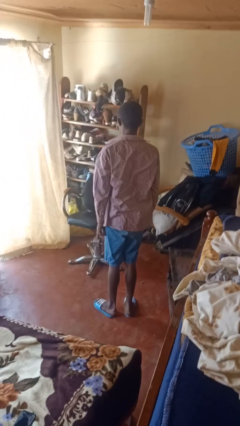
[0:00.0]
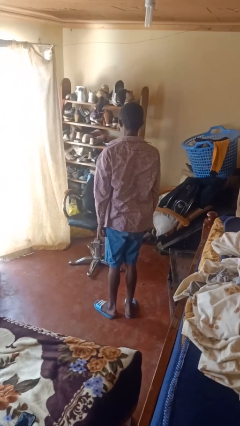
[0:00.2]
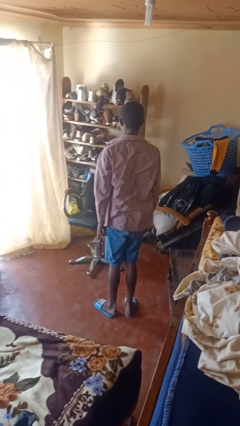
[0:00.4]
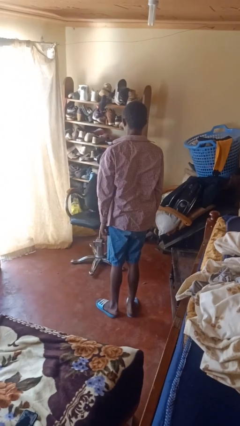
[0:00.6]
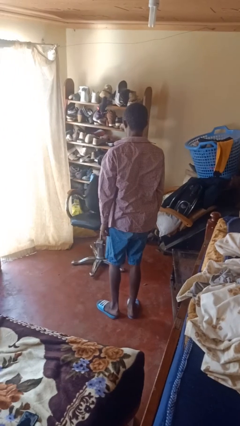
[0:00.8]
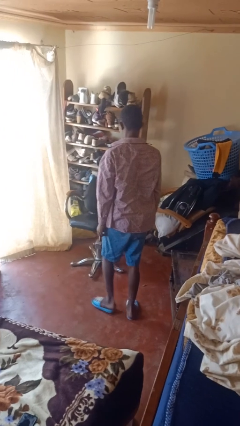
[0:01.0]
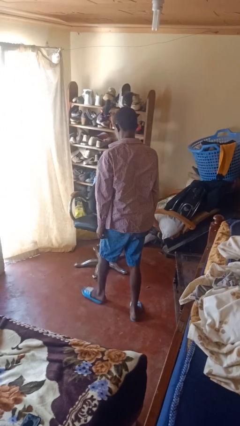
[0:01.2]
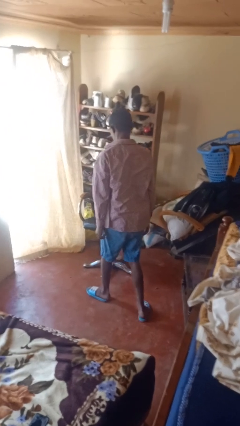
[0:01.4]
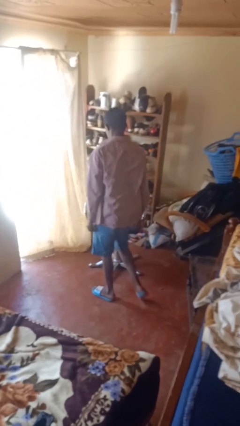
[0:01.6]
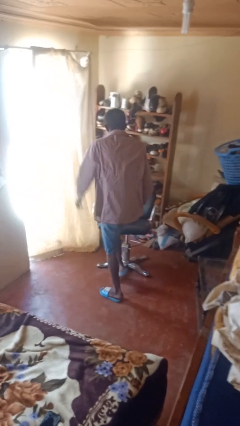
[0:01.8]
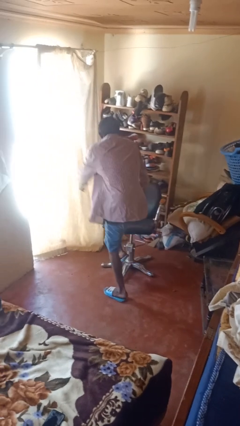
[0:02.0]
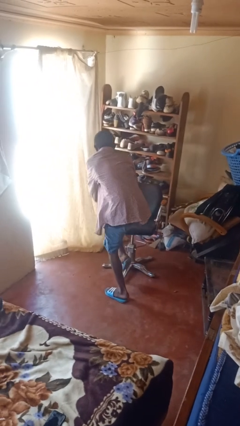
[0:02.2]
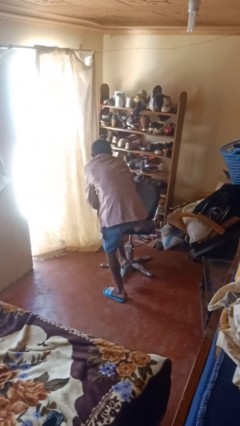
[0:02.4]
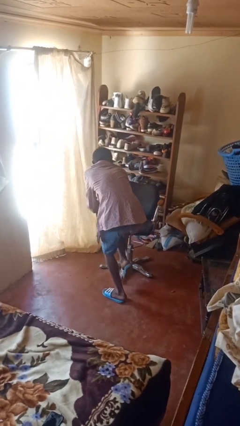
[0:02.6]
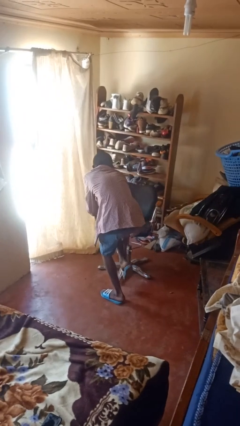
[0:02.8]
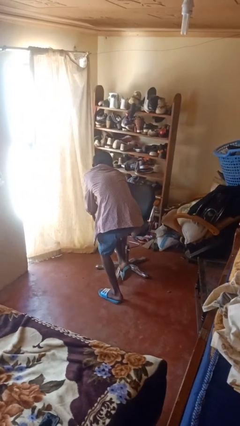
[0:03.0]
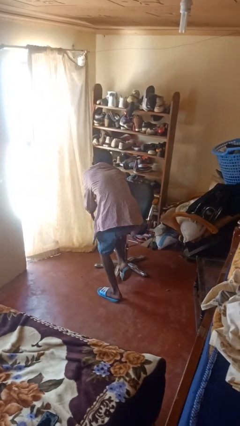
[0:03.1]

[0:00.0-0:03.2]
person stubs toe

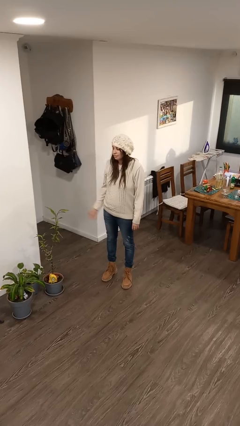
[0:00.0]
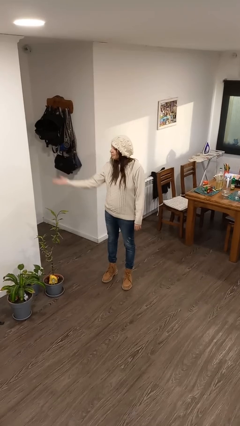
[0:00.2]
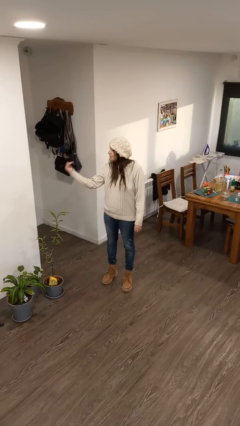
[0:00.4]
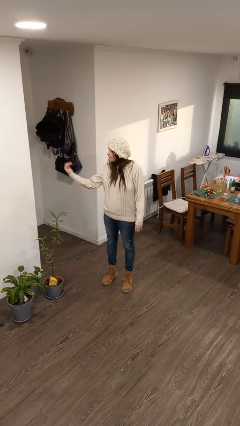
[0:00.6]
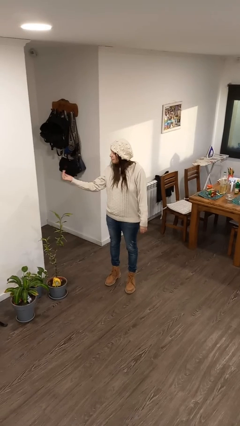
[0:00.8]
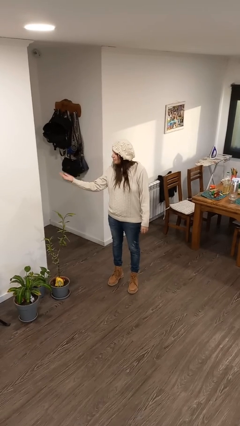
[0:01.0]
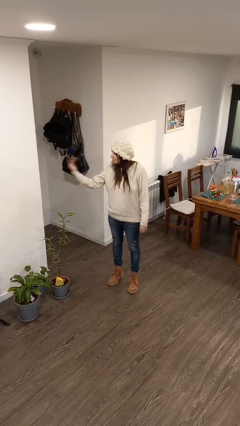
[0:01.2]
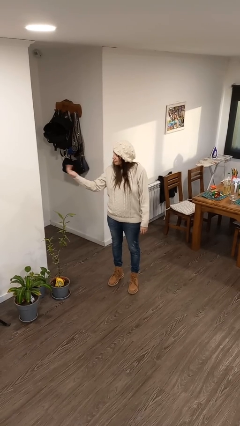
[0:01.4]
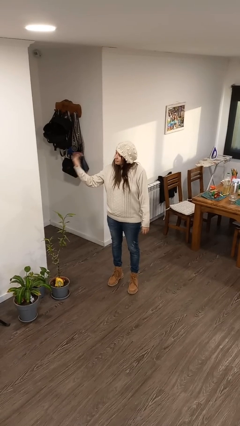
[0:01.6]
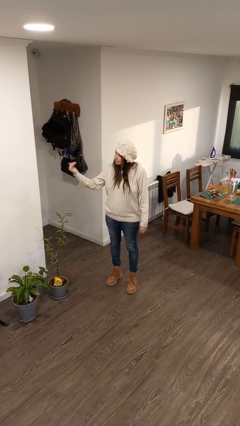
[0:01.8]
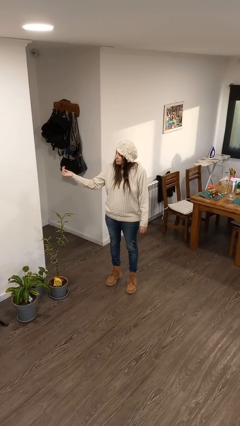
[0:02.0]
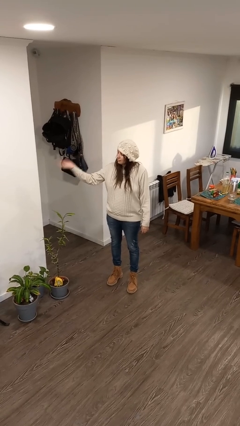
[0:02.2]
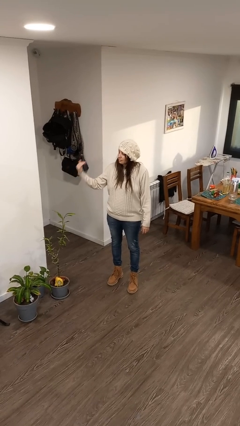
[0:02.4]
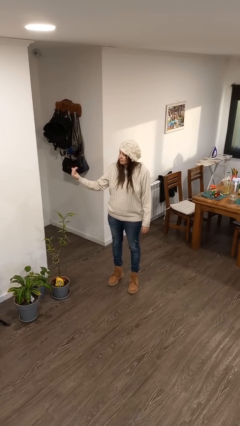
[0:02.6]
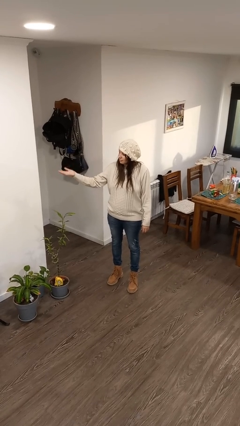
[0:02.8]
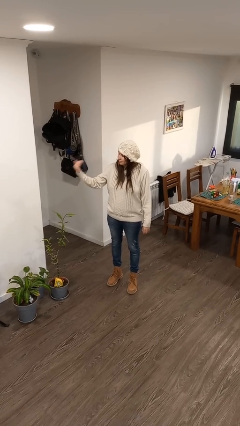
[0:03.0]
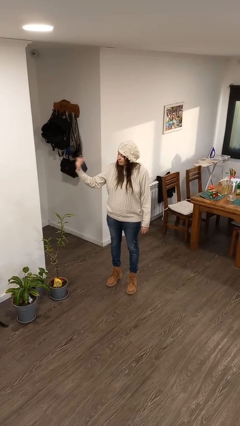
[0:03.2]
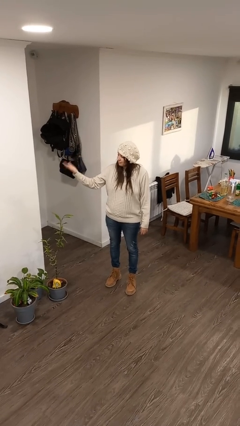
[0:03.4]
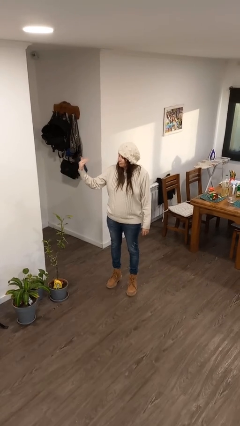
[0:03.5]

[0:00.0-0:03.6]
person gestures come here

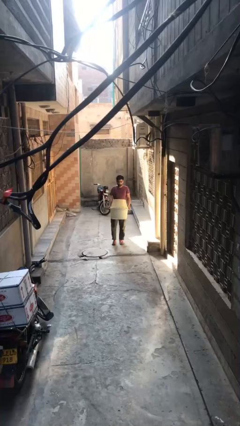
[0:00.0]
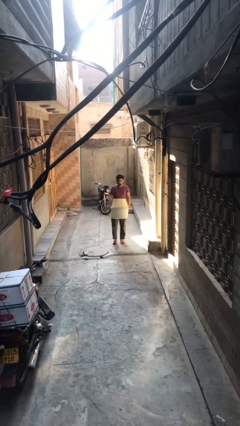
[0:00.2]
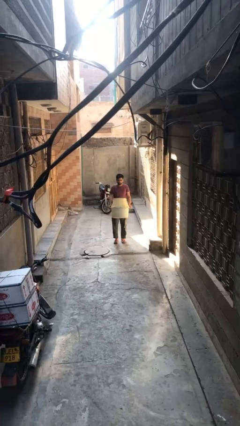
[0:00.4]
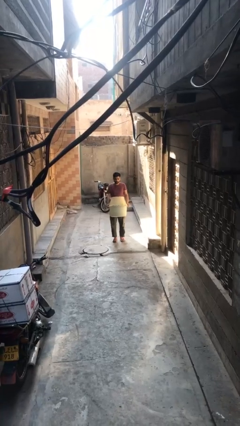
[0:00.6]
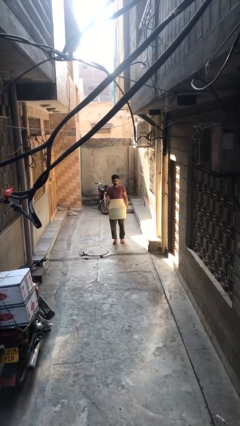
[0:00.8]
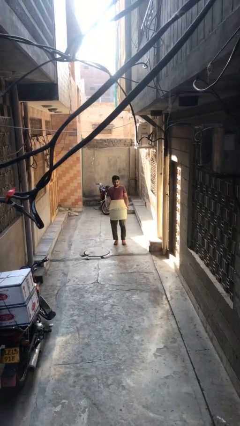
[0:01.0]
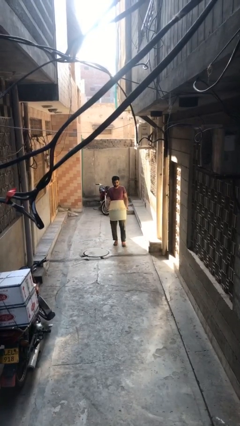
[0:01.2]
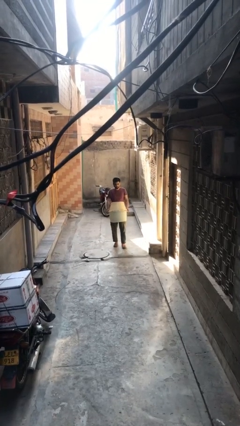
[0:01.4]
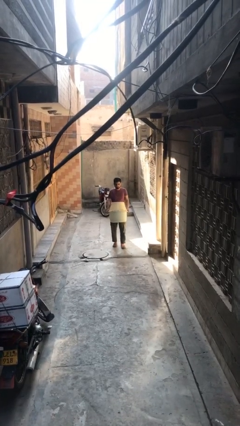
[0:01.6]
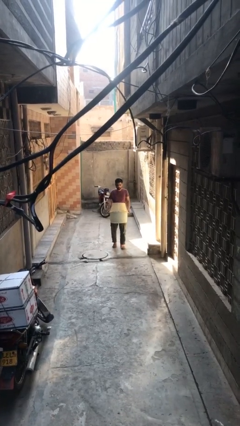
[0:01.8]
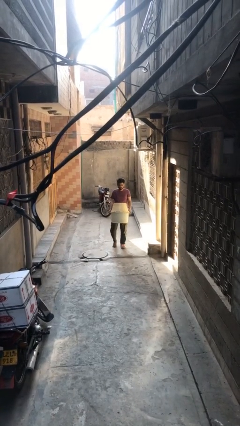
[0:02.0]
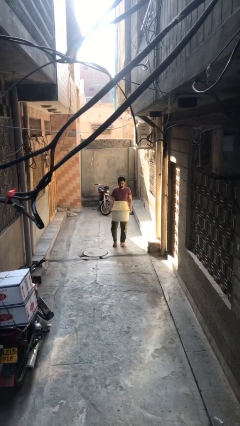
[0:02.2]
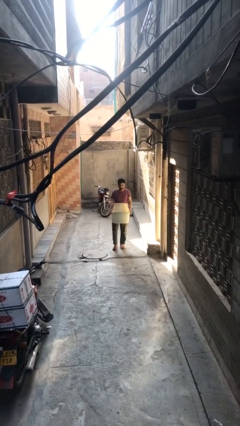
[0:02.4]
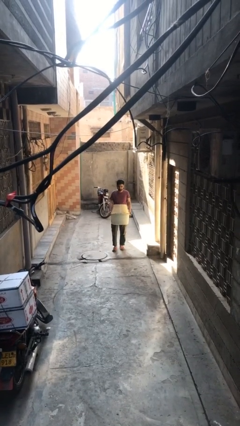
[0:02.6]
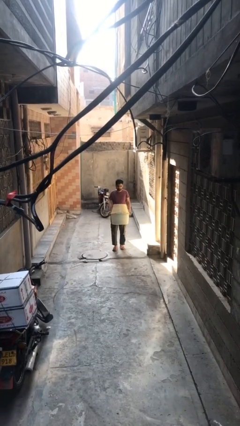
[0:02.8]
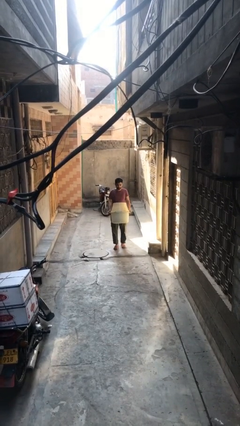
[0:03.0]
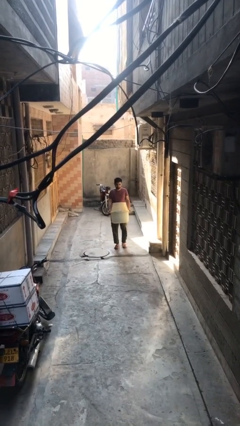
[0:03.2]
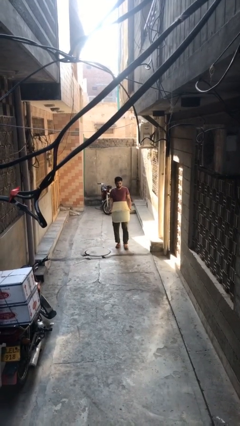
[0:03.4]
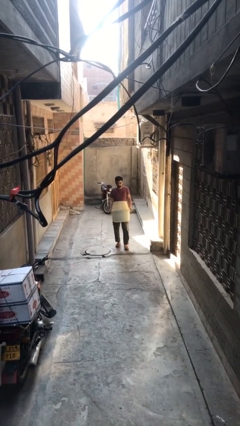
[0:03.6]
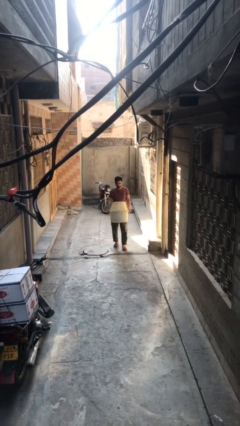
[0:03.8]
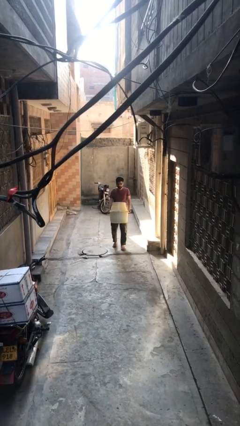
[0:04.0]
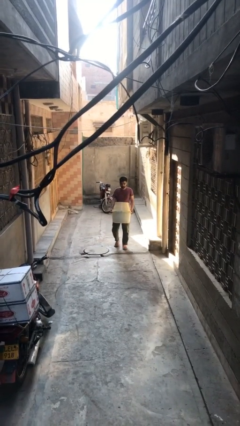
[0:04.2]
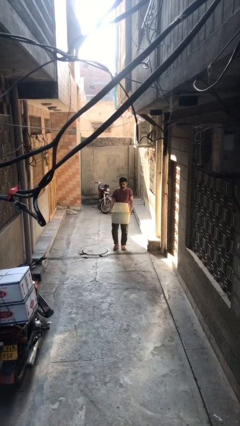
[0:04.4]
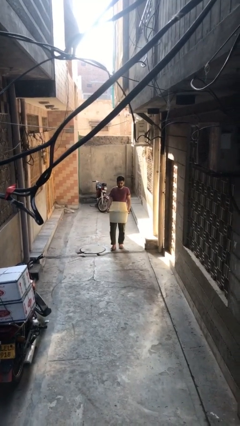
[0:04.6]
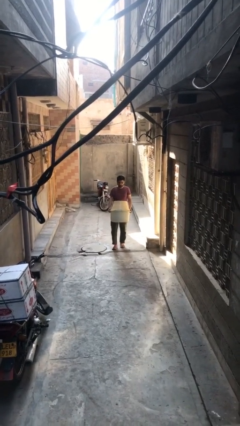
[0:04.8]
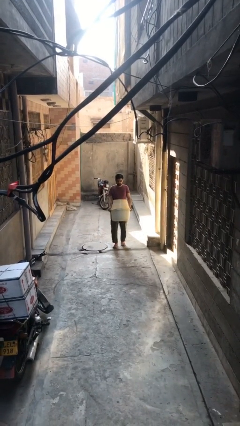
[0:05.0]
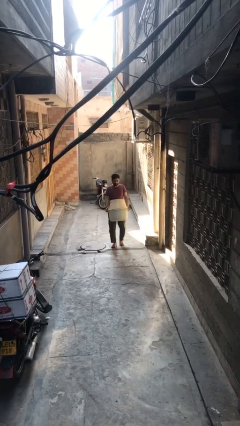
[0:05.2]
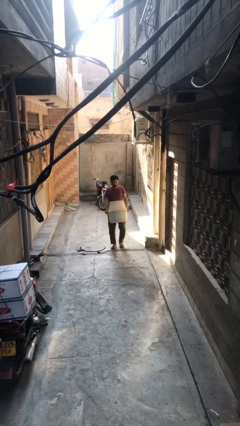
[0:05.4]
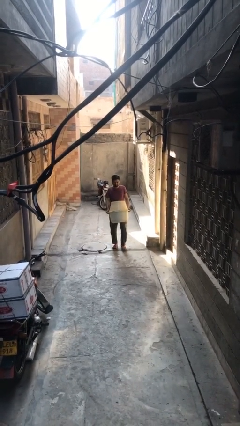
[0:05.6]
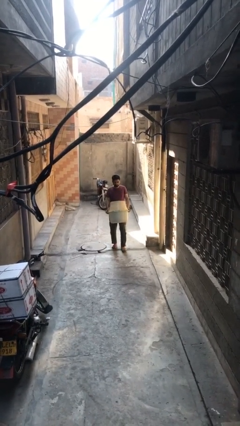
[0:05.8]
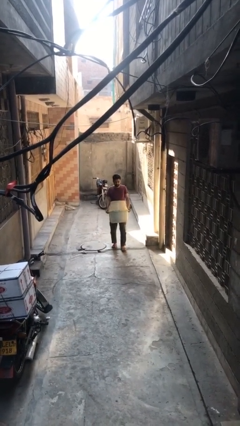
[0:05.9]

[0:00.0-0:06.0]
person carries heavy object

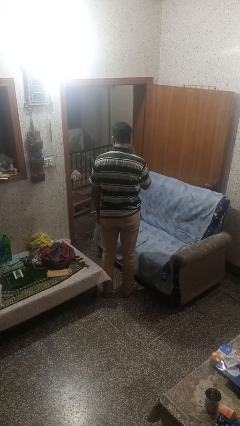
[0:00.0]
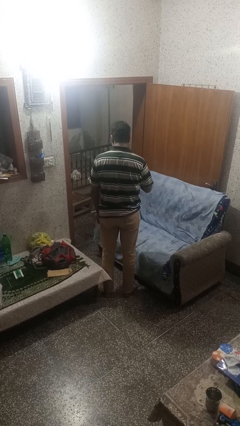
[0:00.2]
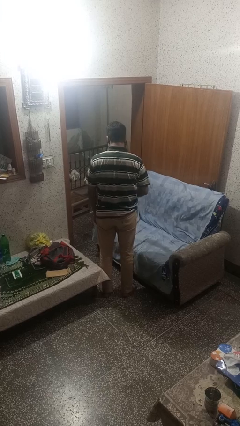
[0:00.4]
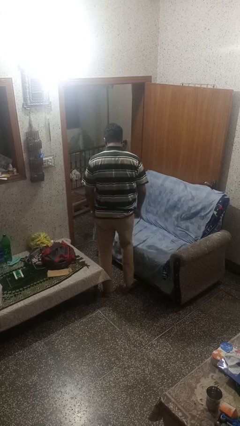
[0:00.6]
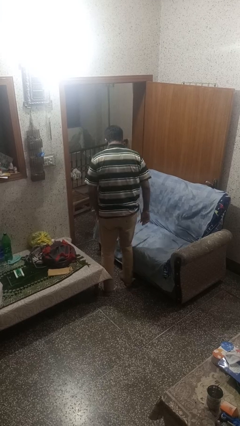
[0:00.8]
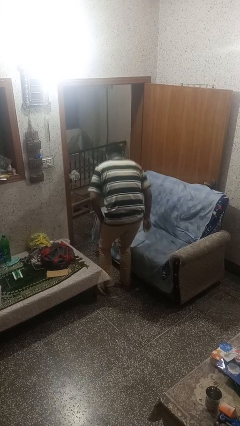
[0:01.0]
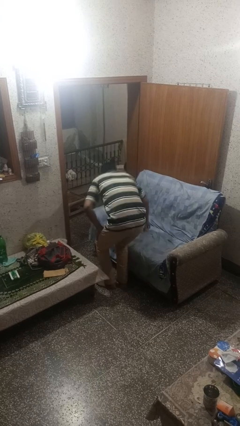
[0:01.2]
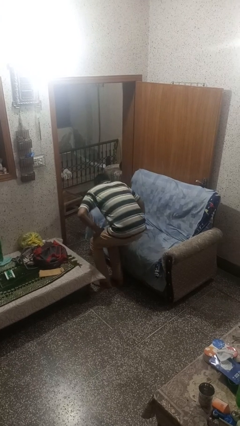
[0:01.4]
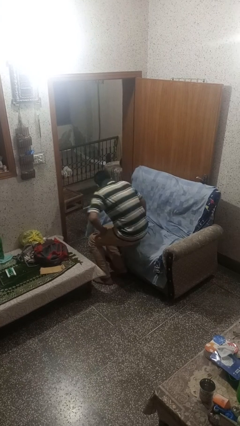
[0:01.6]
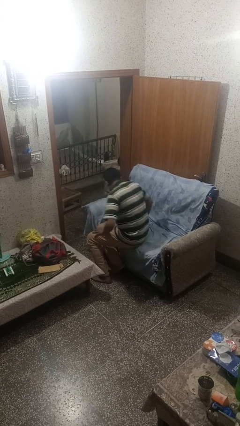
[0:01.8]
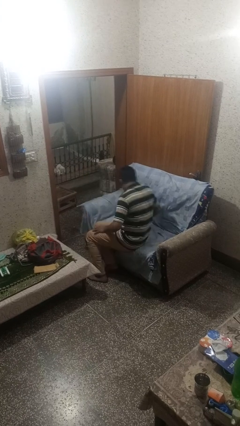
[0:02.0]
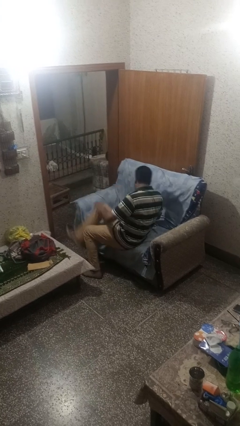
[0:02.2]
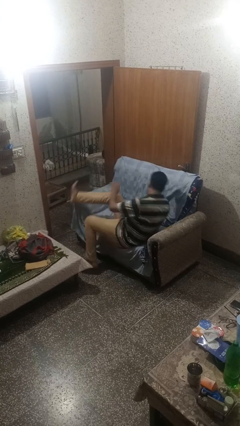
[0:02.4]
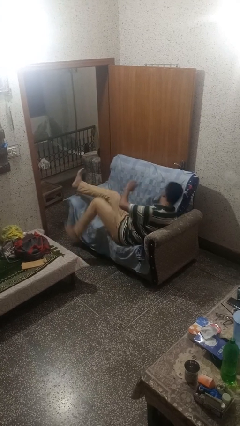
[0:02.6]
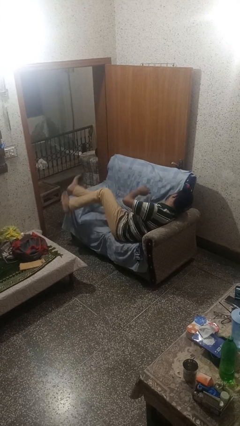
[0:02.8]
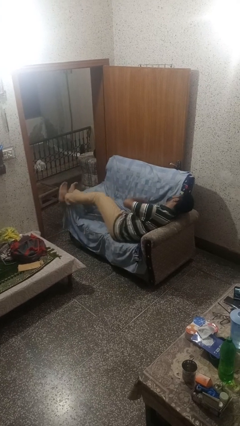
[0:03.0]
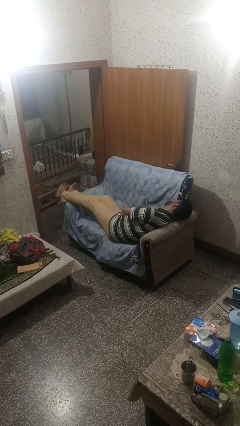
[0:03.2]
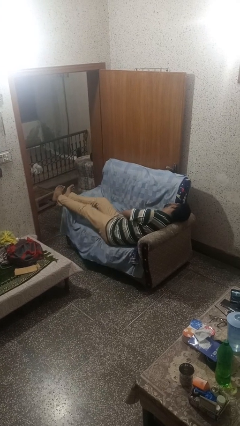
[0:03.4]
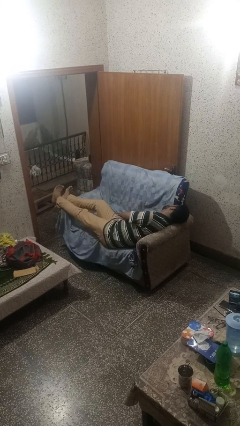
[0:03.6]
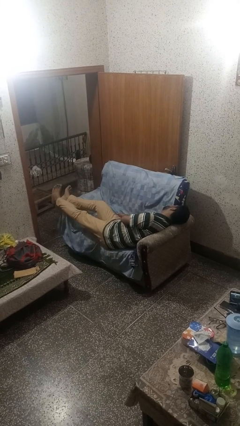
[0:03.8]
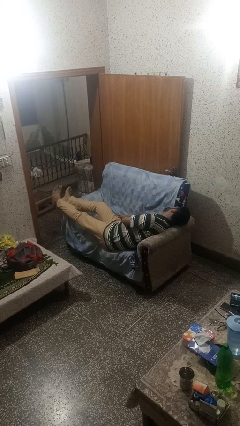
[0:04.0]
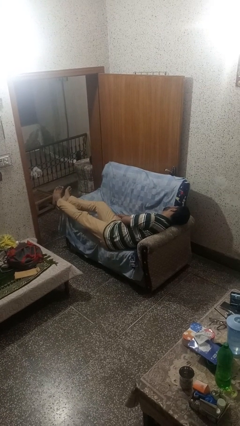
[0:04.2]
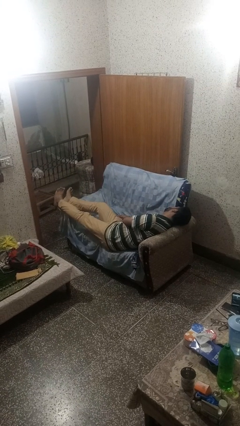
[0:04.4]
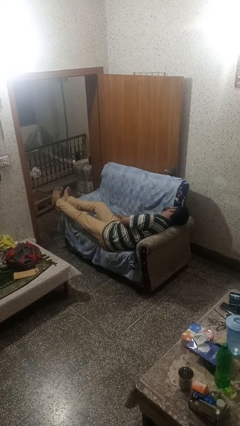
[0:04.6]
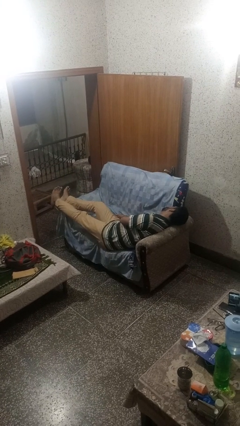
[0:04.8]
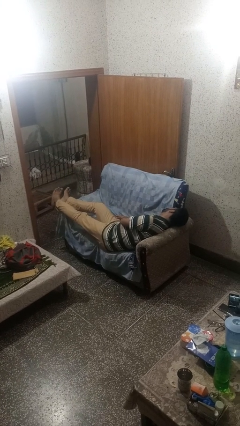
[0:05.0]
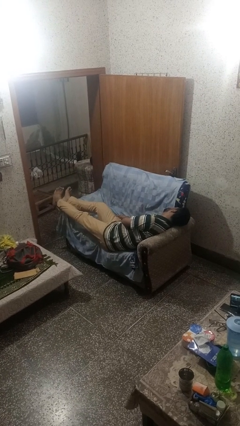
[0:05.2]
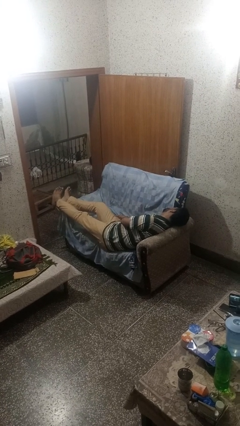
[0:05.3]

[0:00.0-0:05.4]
person lies down on couch
